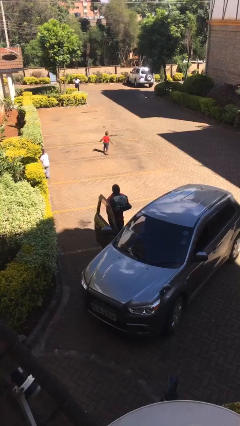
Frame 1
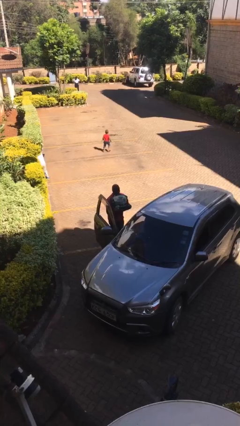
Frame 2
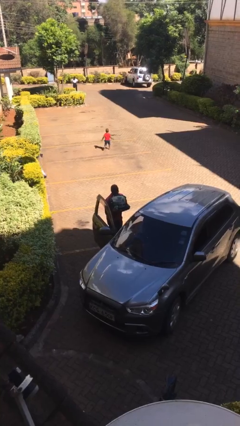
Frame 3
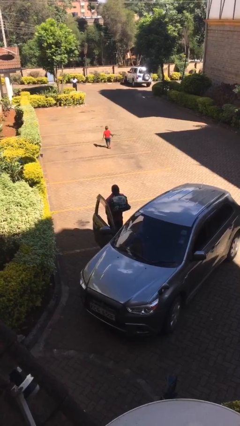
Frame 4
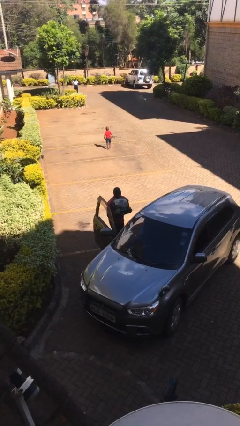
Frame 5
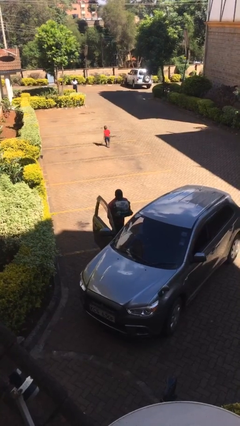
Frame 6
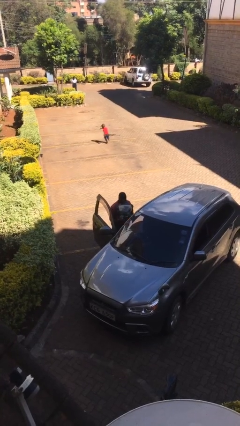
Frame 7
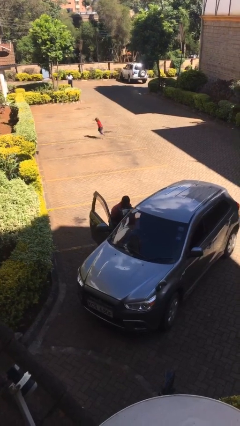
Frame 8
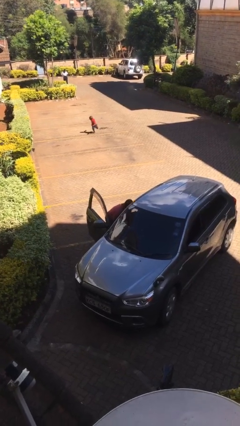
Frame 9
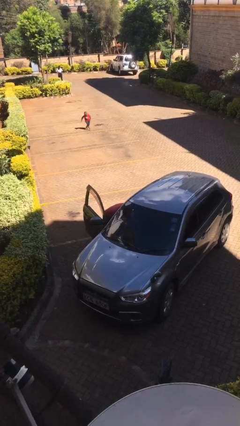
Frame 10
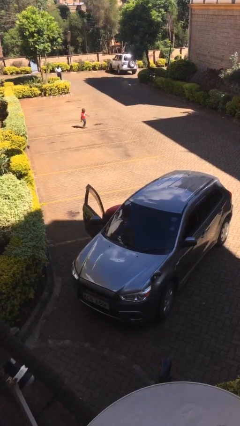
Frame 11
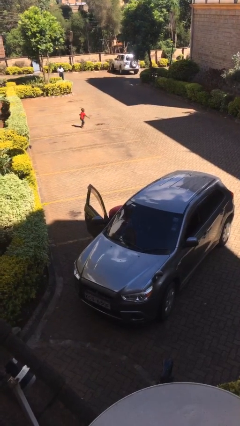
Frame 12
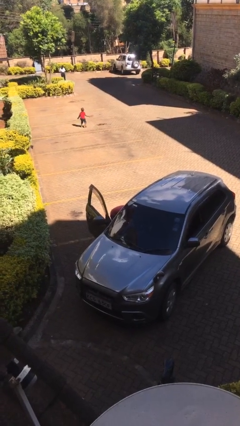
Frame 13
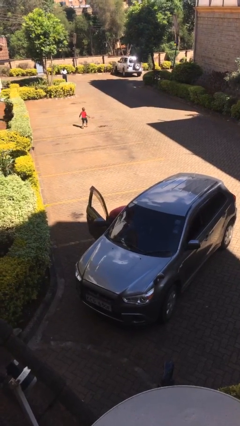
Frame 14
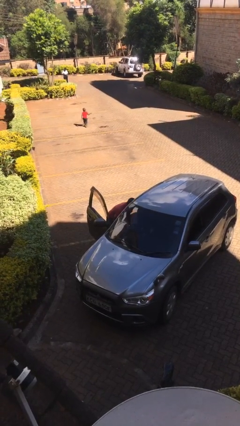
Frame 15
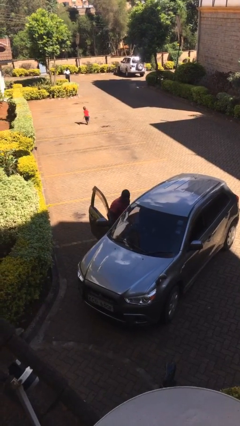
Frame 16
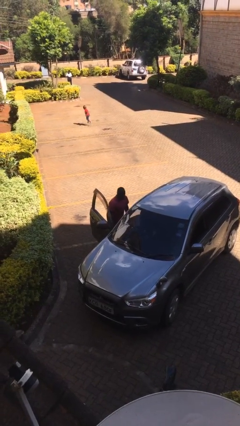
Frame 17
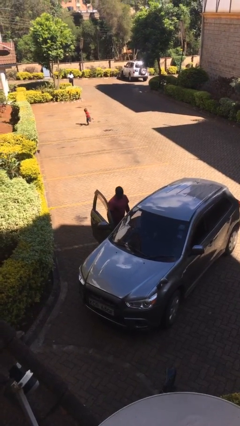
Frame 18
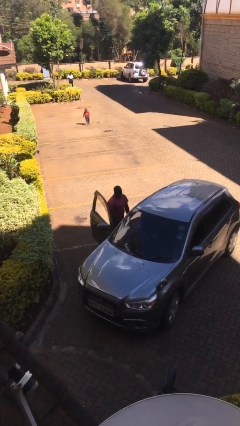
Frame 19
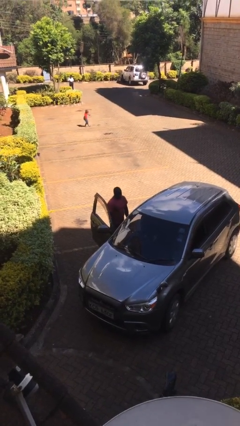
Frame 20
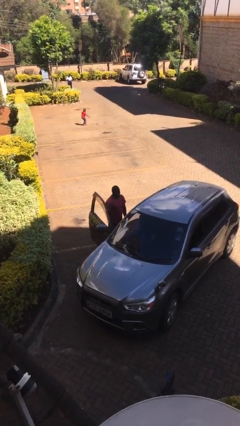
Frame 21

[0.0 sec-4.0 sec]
person loads car

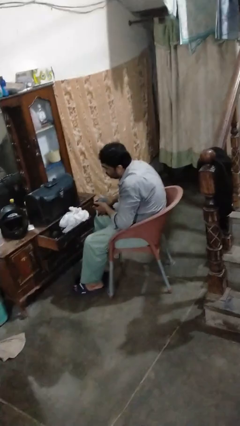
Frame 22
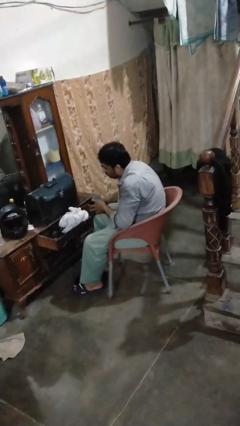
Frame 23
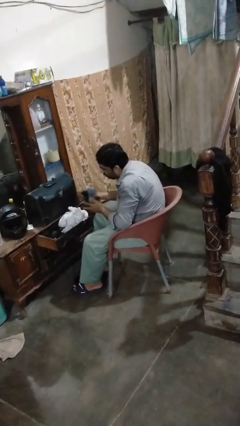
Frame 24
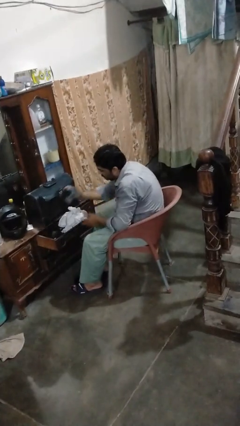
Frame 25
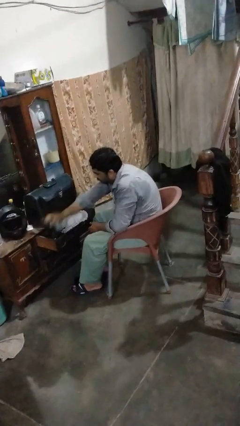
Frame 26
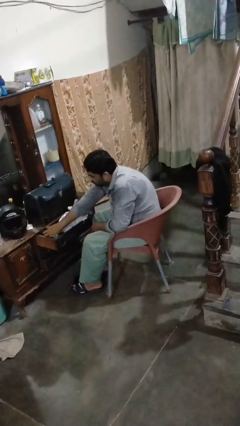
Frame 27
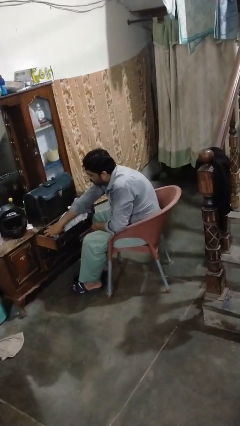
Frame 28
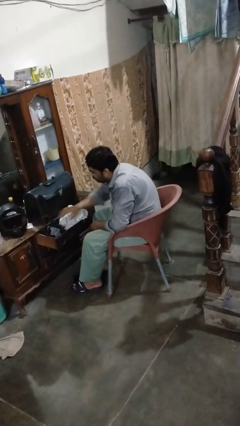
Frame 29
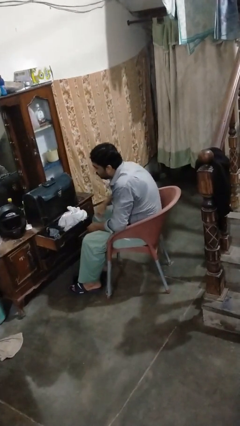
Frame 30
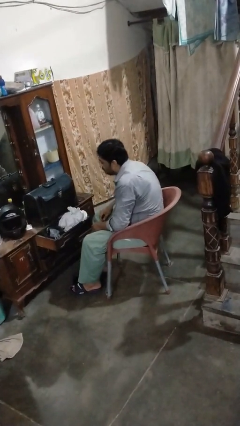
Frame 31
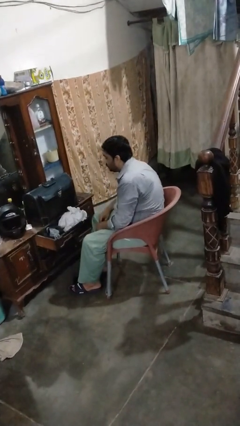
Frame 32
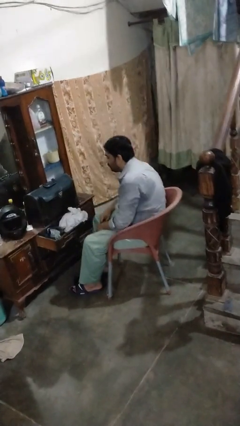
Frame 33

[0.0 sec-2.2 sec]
person puts clothes into dresser

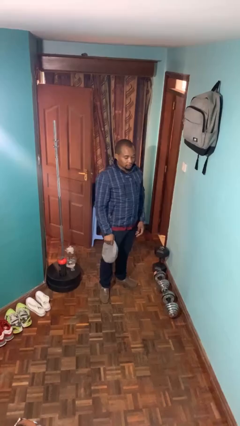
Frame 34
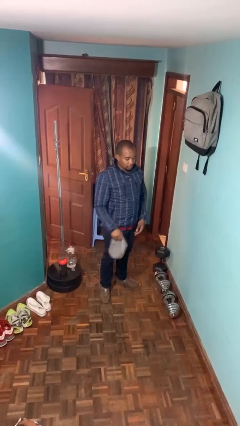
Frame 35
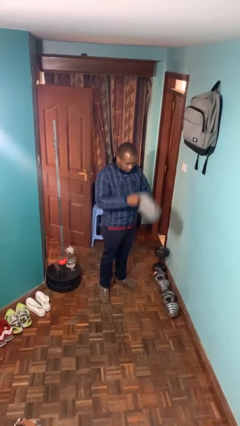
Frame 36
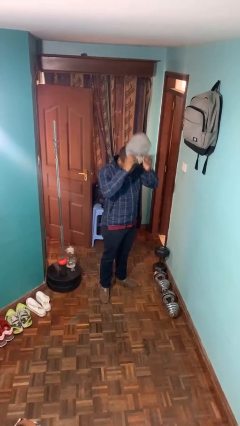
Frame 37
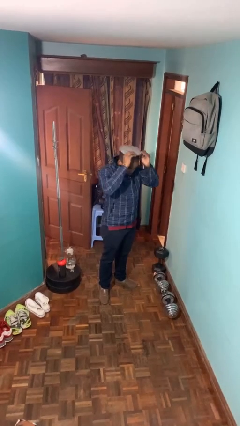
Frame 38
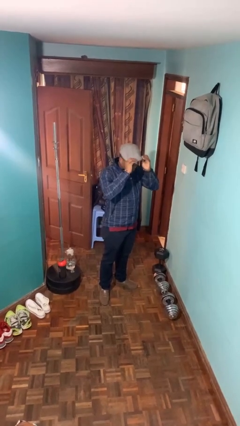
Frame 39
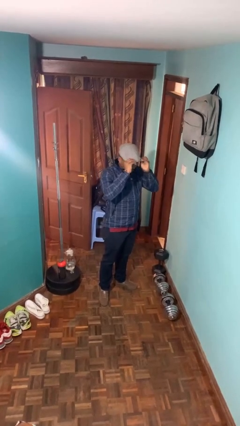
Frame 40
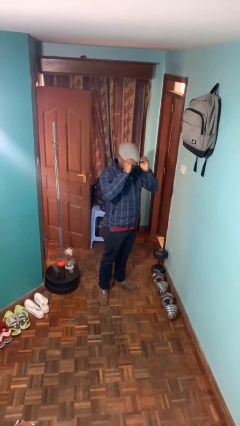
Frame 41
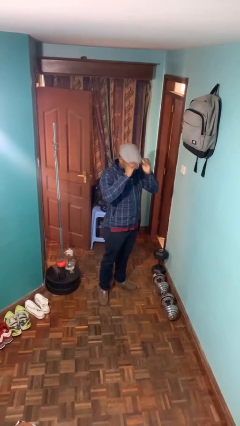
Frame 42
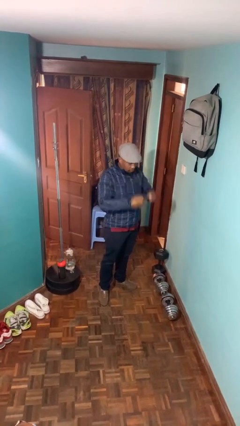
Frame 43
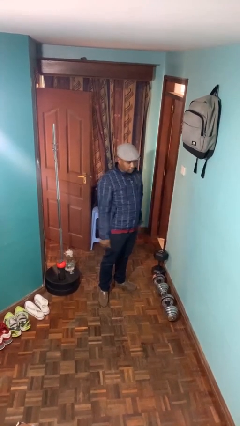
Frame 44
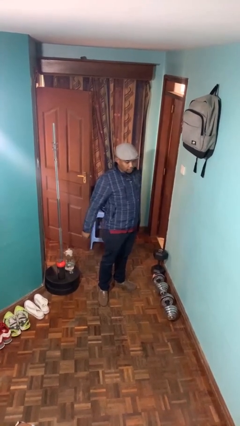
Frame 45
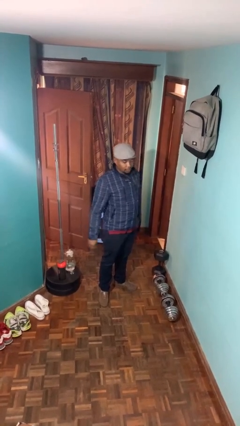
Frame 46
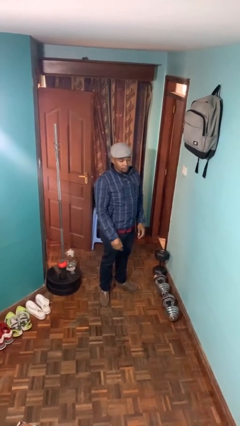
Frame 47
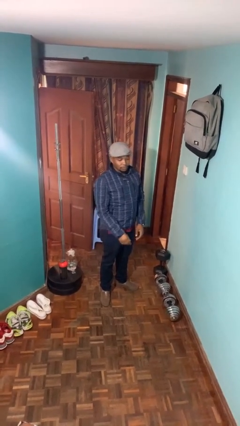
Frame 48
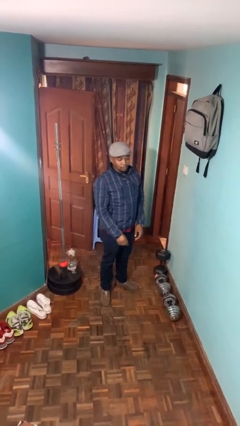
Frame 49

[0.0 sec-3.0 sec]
person puts on hat

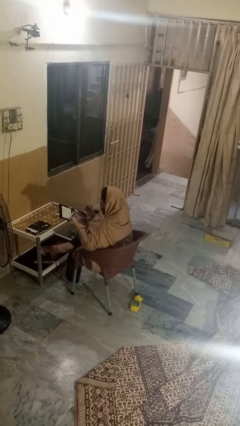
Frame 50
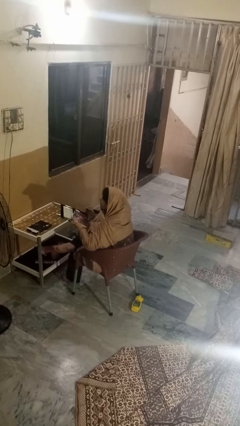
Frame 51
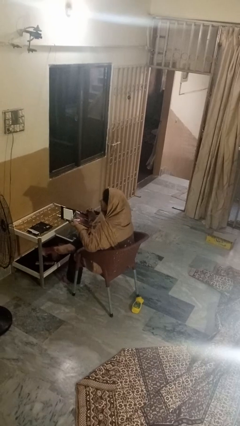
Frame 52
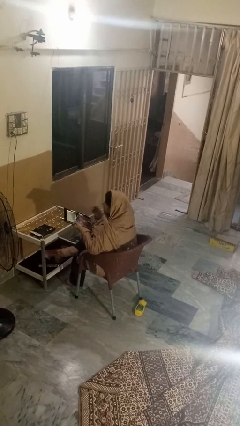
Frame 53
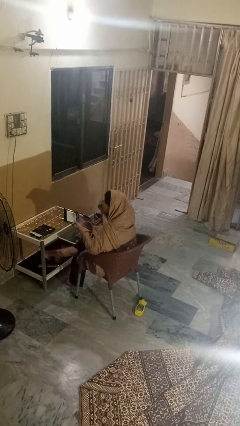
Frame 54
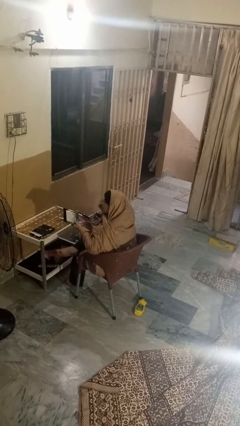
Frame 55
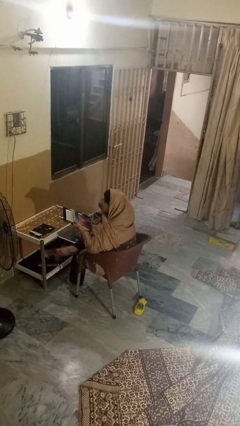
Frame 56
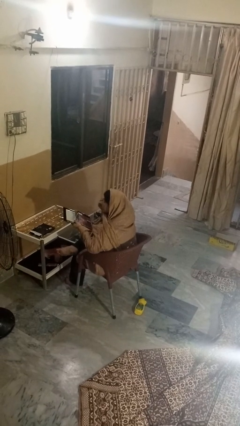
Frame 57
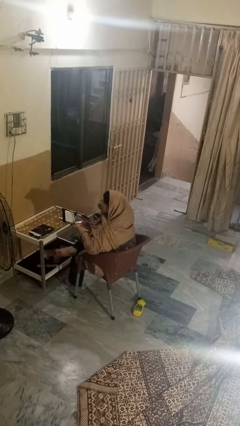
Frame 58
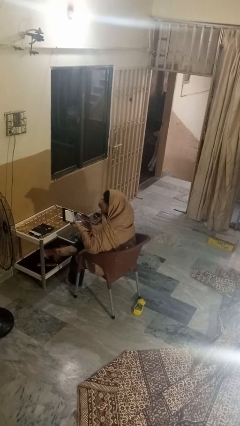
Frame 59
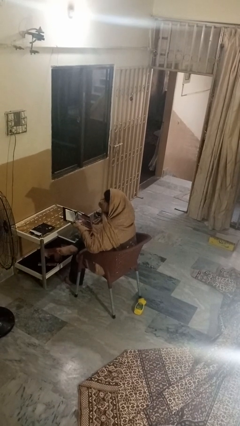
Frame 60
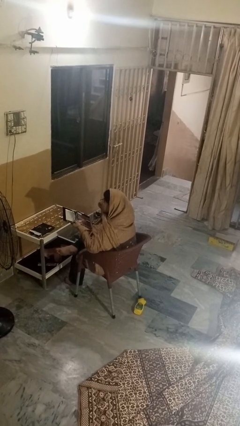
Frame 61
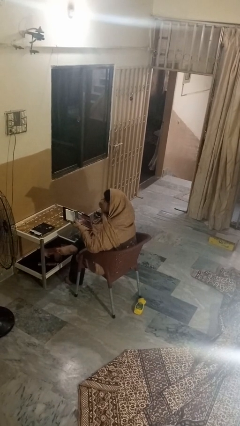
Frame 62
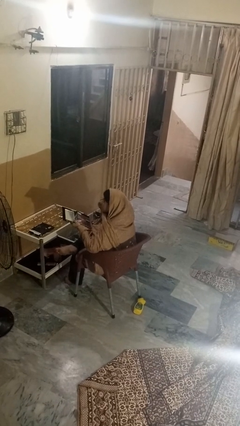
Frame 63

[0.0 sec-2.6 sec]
person applies eye makeup

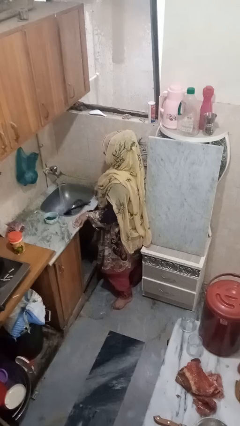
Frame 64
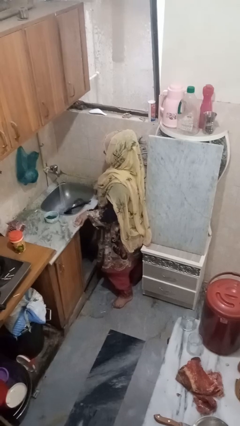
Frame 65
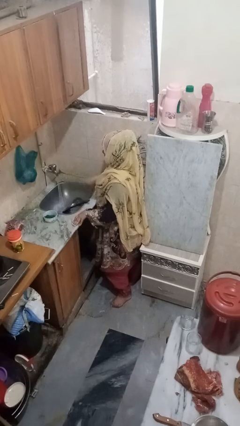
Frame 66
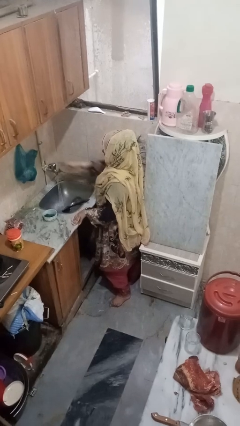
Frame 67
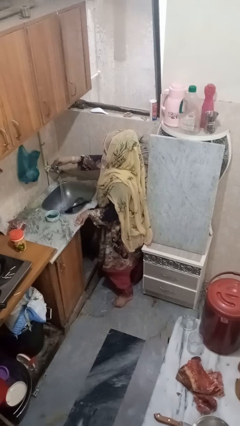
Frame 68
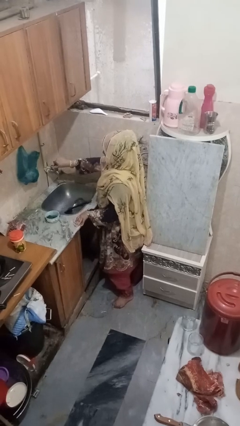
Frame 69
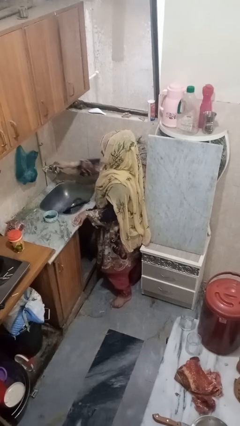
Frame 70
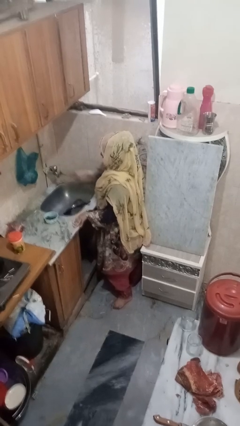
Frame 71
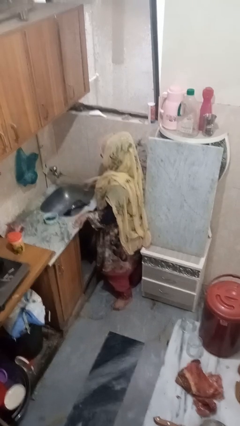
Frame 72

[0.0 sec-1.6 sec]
person turns off faucet
